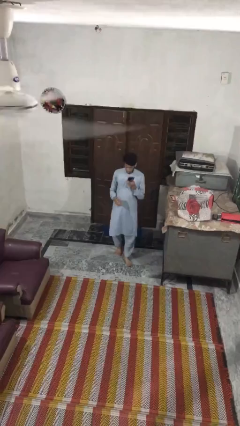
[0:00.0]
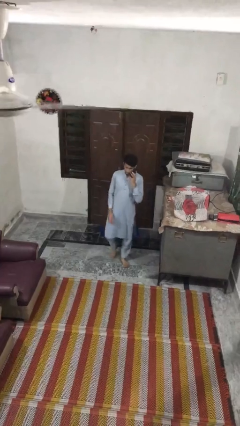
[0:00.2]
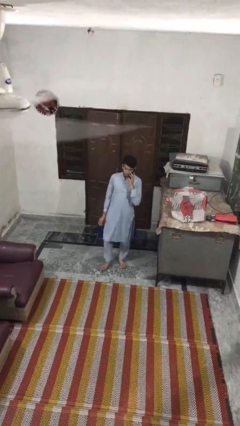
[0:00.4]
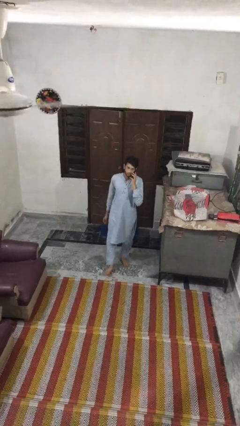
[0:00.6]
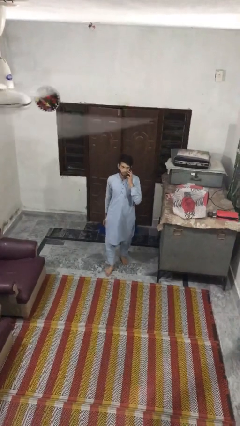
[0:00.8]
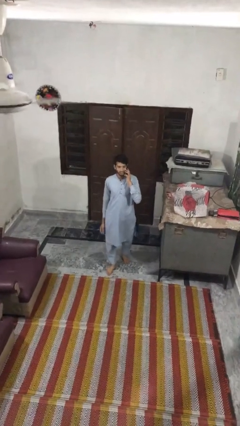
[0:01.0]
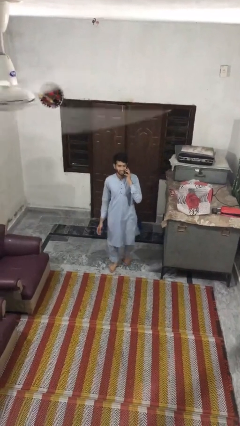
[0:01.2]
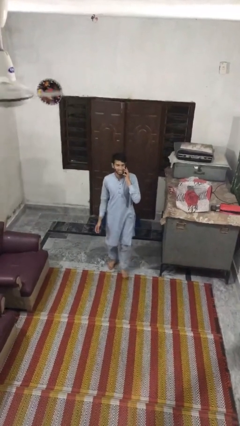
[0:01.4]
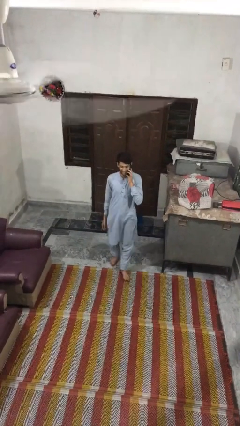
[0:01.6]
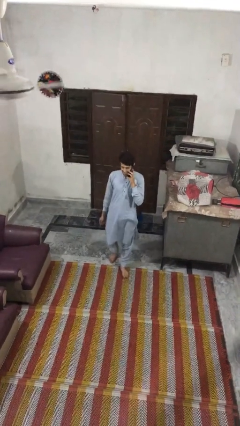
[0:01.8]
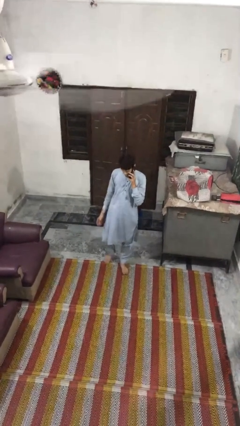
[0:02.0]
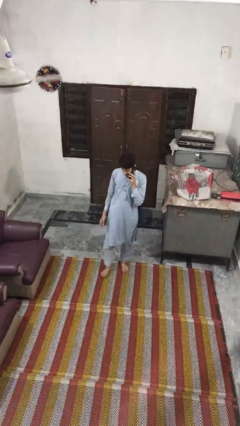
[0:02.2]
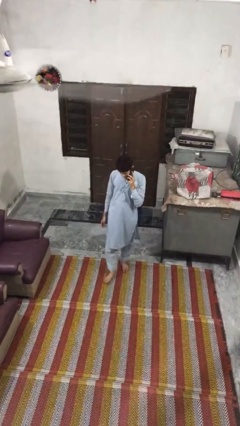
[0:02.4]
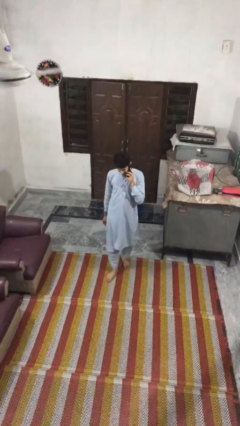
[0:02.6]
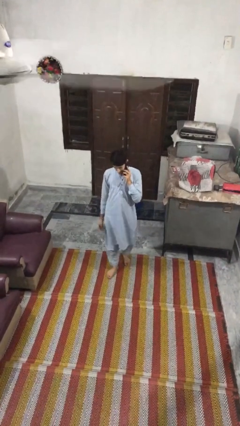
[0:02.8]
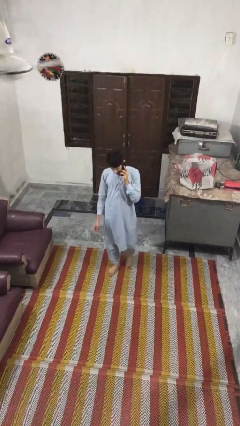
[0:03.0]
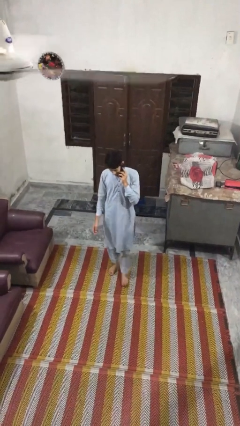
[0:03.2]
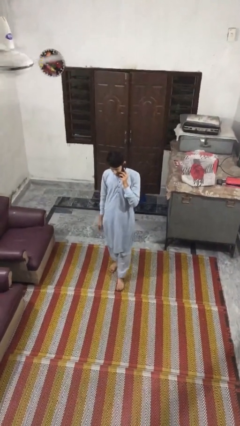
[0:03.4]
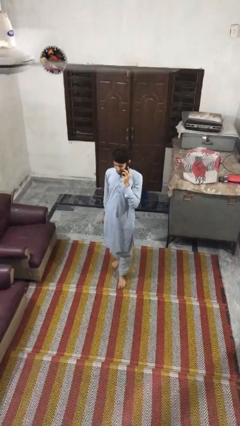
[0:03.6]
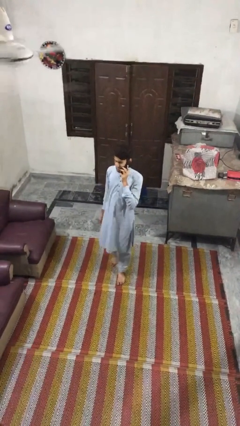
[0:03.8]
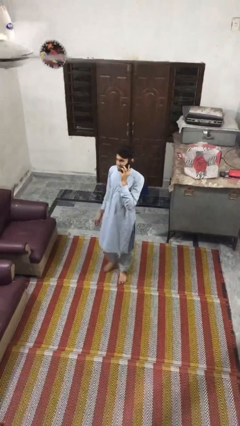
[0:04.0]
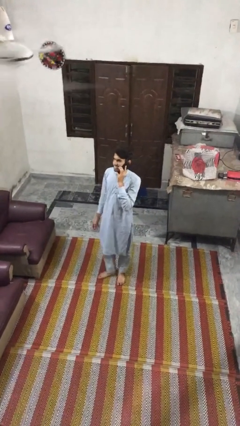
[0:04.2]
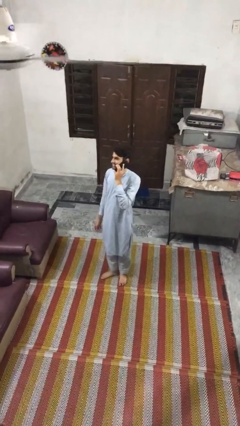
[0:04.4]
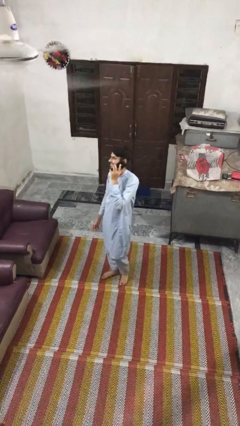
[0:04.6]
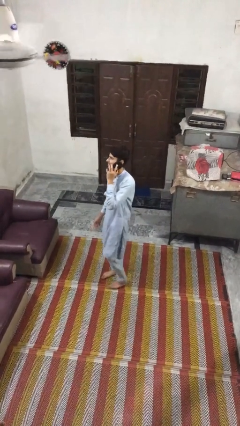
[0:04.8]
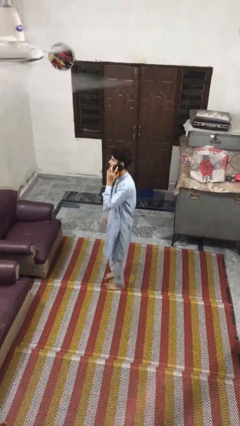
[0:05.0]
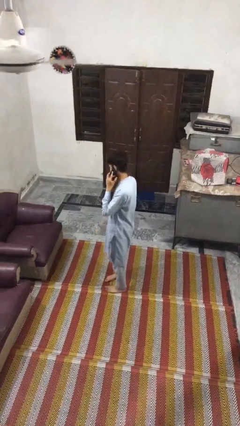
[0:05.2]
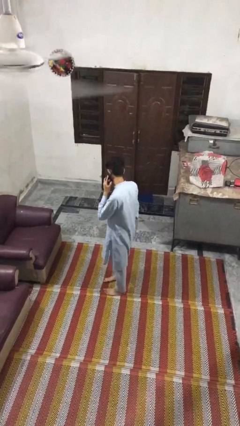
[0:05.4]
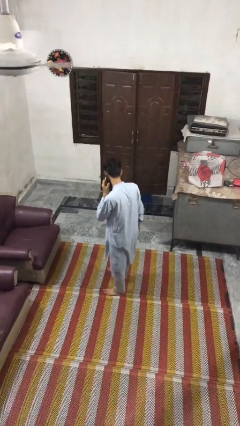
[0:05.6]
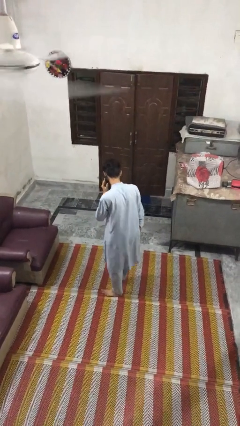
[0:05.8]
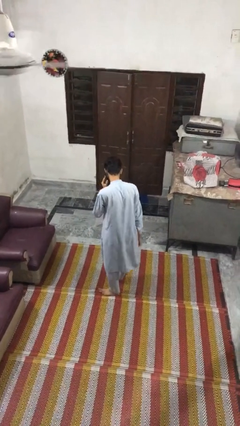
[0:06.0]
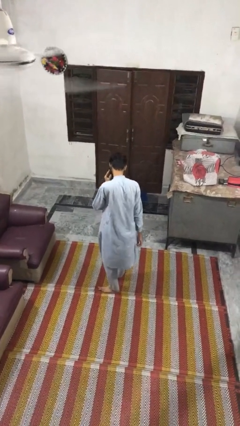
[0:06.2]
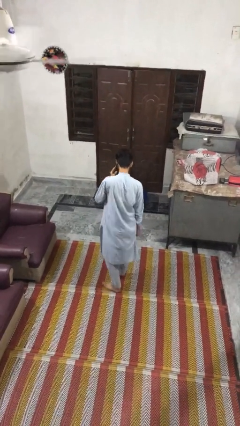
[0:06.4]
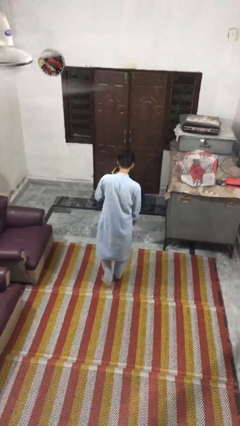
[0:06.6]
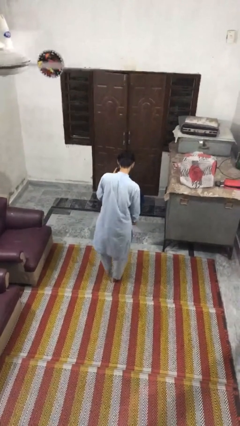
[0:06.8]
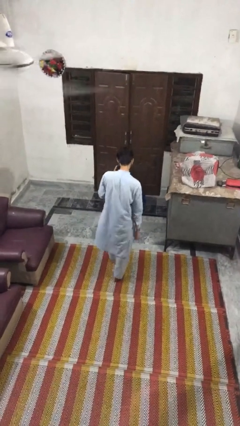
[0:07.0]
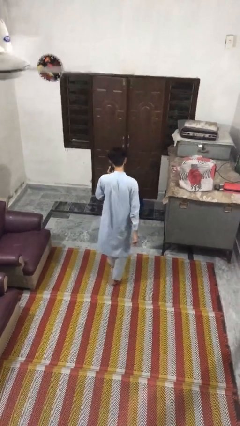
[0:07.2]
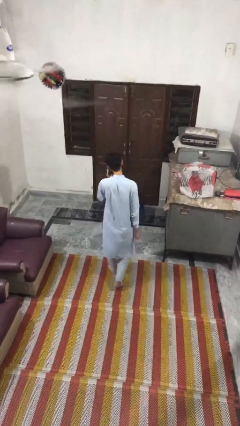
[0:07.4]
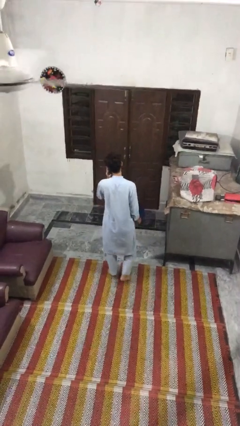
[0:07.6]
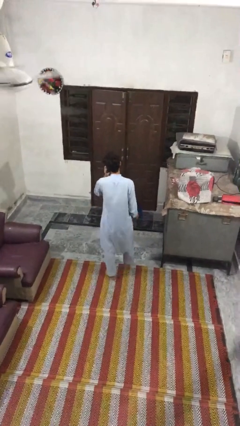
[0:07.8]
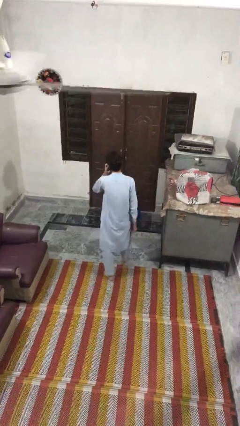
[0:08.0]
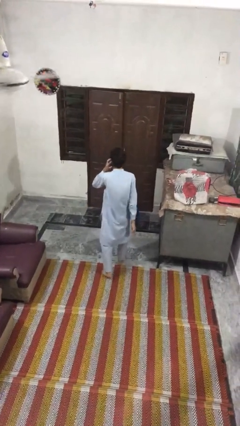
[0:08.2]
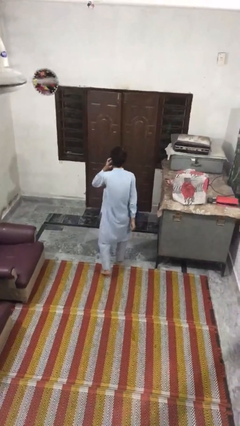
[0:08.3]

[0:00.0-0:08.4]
person talks on phone

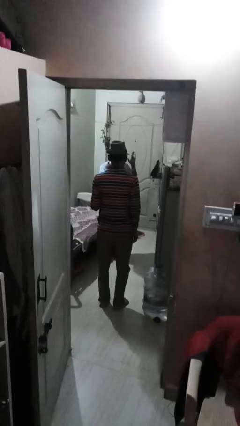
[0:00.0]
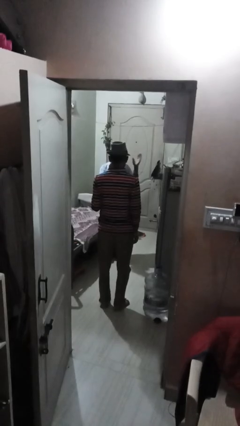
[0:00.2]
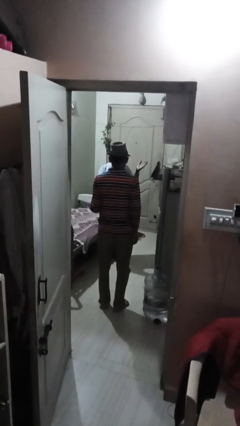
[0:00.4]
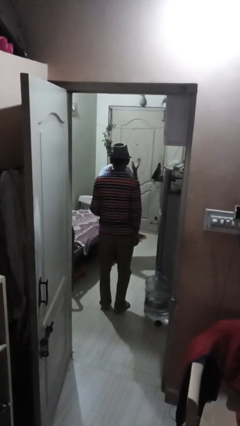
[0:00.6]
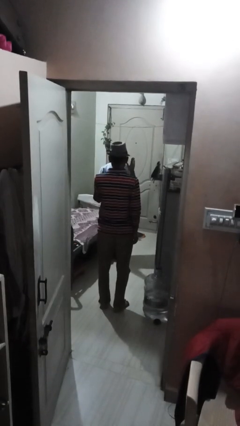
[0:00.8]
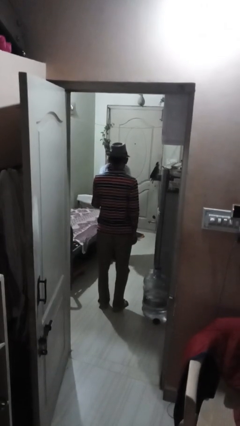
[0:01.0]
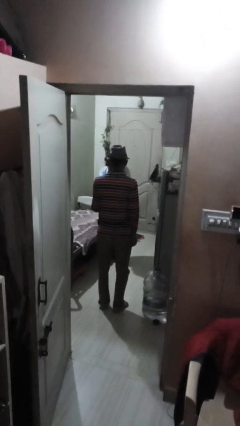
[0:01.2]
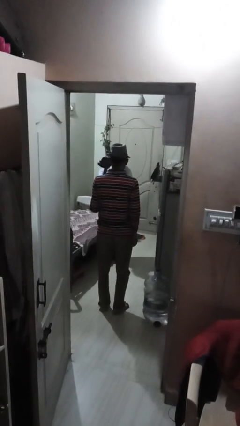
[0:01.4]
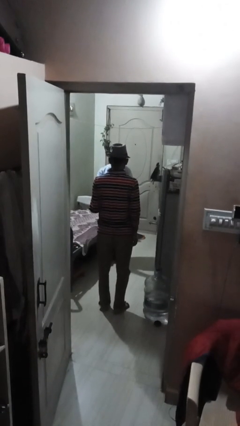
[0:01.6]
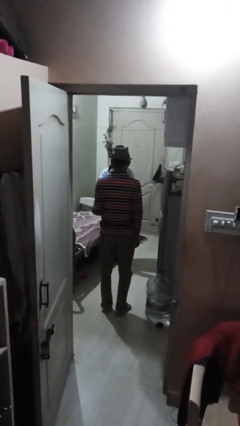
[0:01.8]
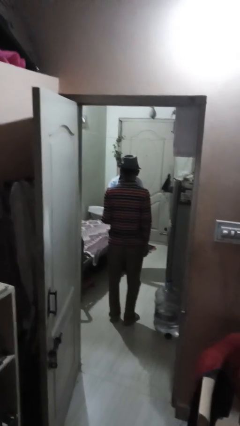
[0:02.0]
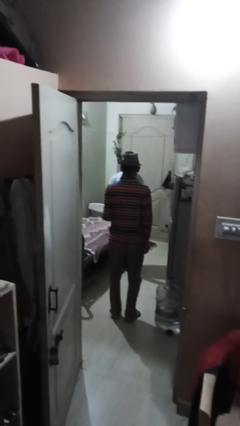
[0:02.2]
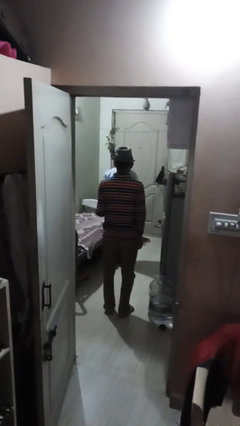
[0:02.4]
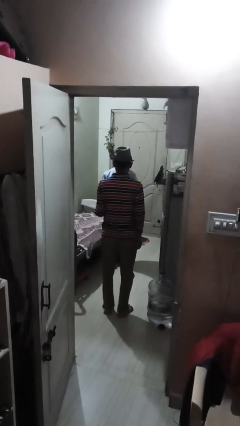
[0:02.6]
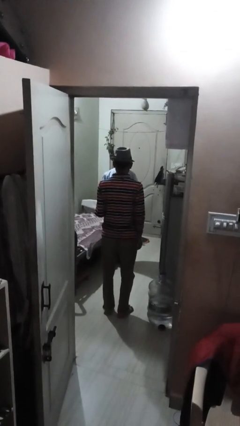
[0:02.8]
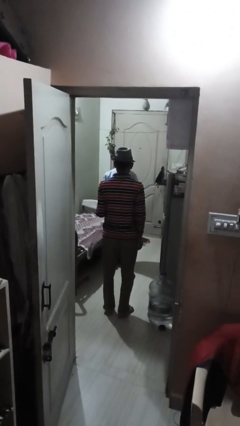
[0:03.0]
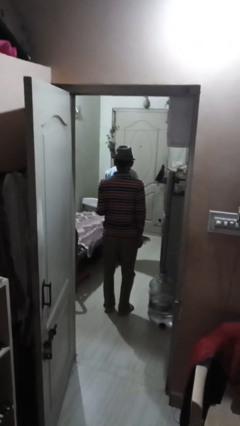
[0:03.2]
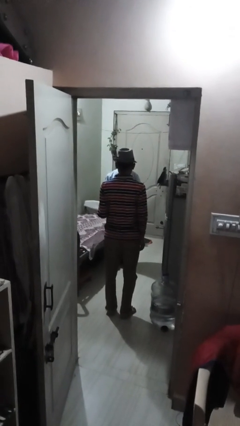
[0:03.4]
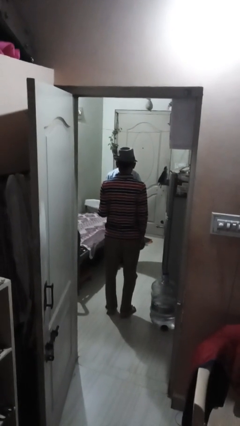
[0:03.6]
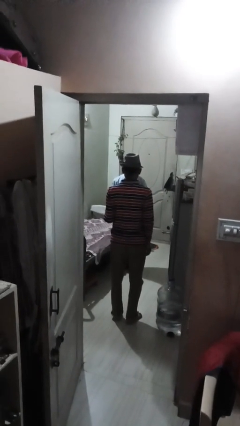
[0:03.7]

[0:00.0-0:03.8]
person throws object to person

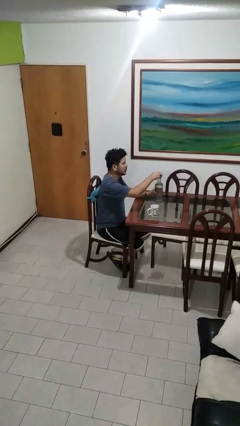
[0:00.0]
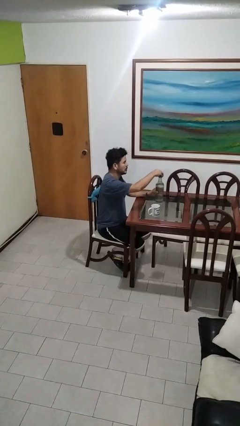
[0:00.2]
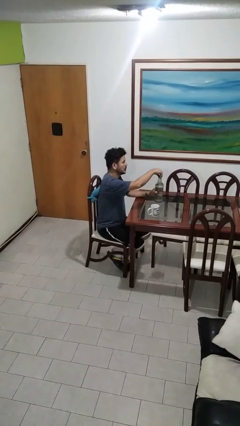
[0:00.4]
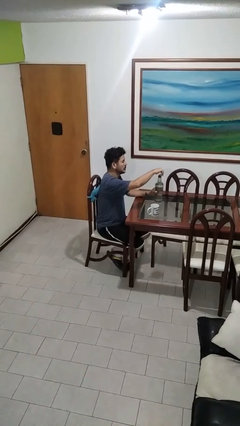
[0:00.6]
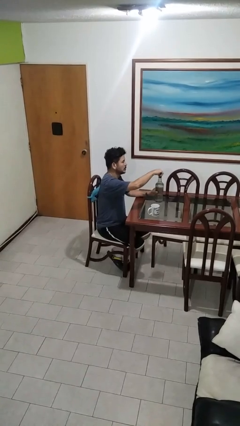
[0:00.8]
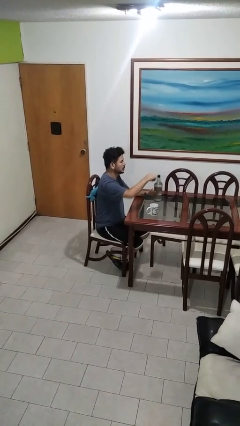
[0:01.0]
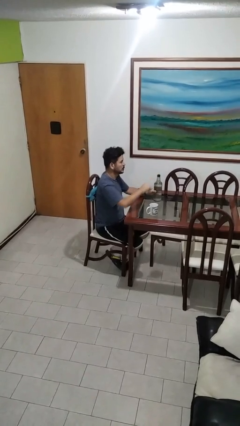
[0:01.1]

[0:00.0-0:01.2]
person screws lid to bottle

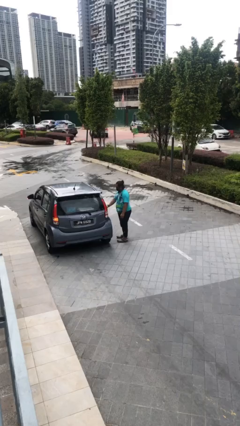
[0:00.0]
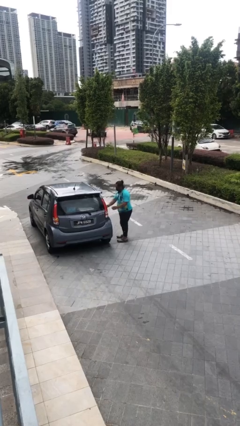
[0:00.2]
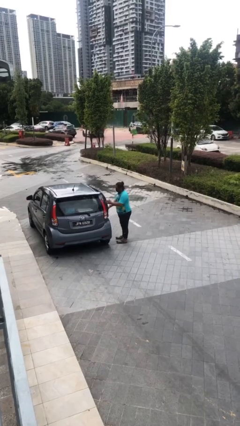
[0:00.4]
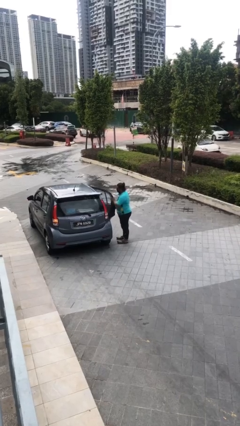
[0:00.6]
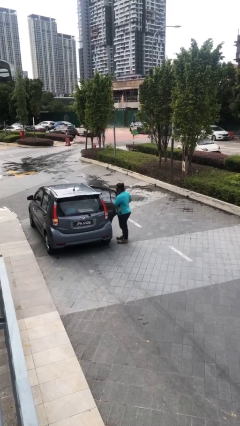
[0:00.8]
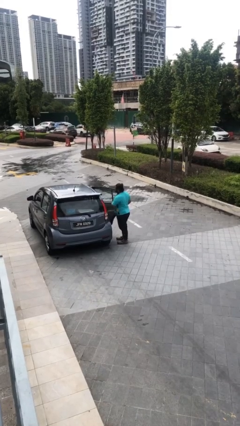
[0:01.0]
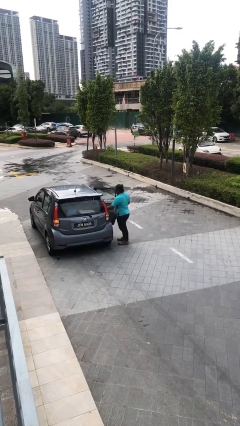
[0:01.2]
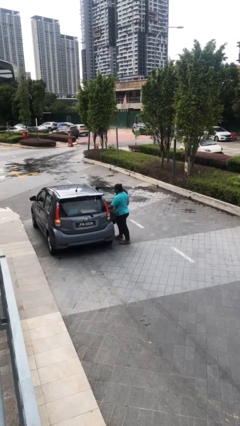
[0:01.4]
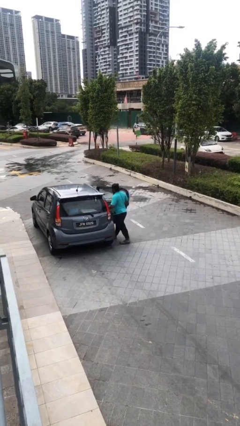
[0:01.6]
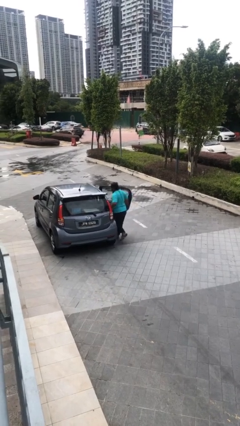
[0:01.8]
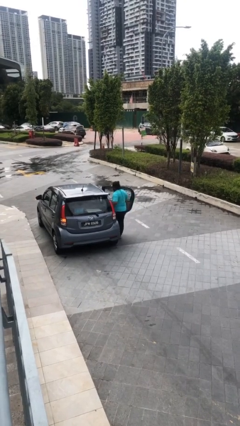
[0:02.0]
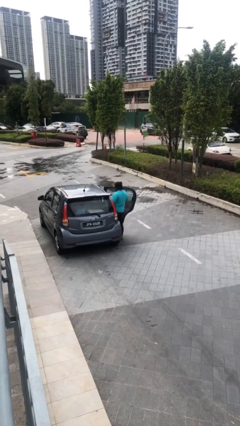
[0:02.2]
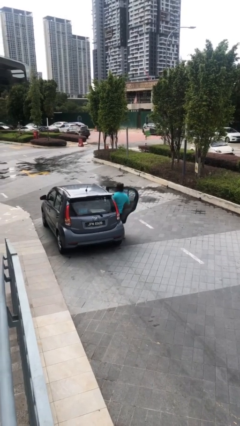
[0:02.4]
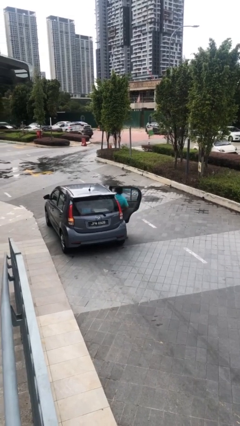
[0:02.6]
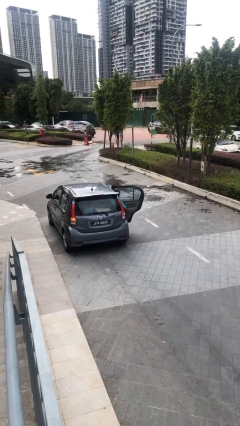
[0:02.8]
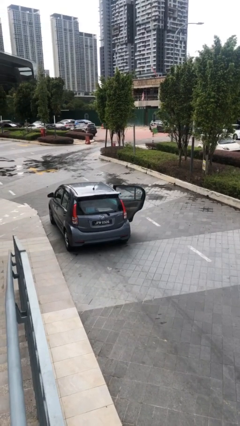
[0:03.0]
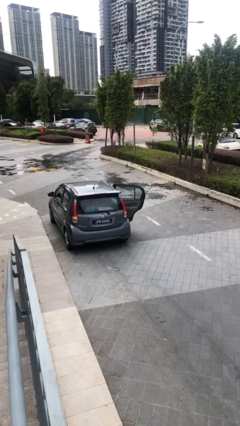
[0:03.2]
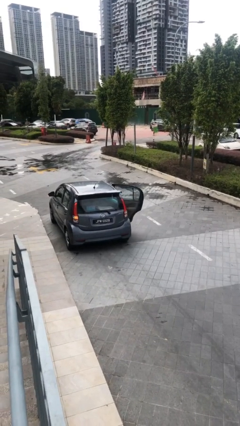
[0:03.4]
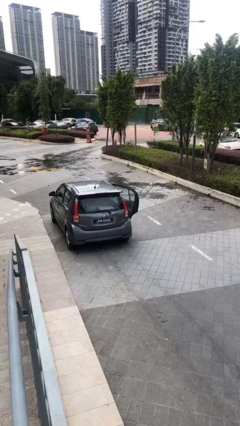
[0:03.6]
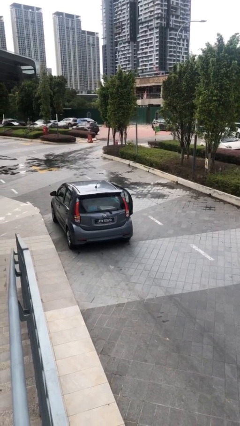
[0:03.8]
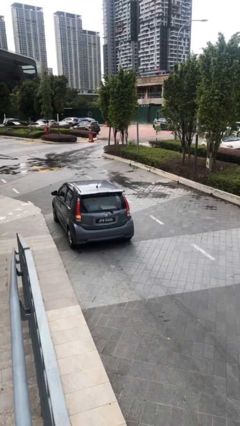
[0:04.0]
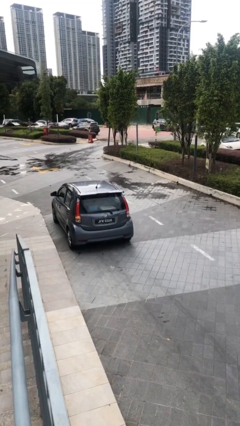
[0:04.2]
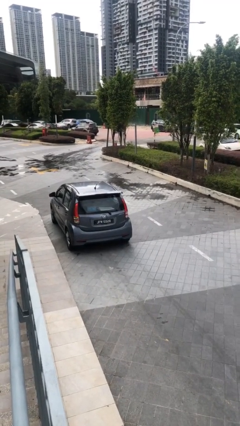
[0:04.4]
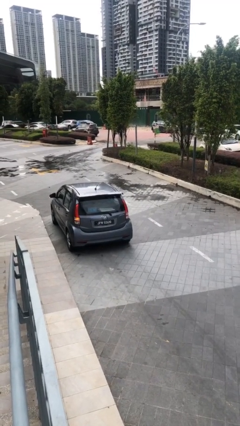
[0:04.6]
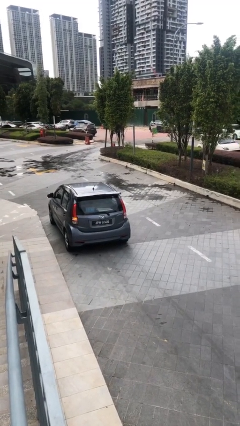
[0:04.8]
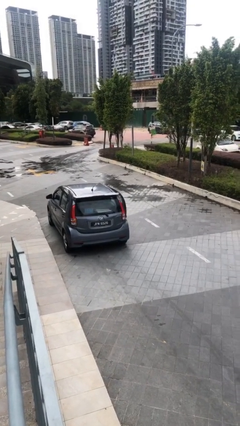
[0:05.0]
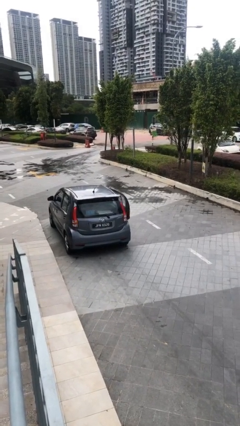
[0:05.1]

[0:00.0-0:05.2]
car picks up person
